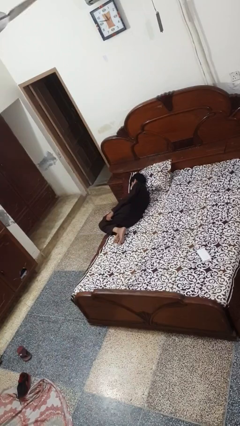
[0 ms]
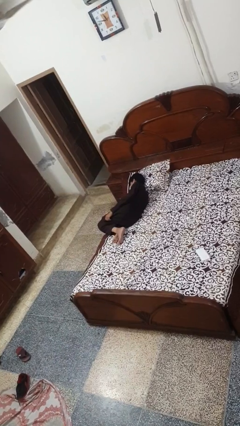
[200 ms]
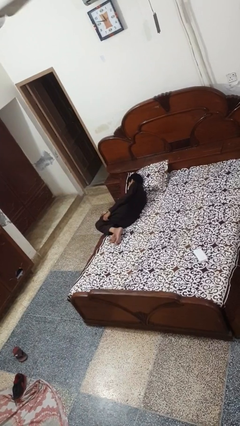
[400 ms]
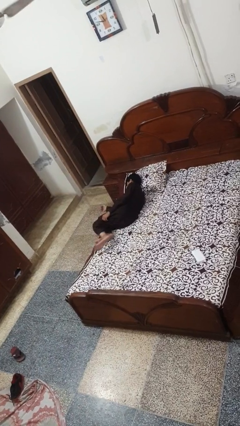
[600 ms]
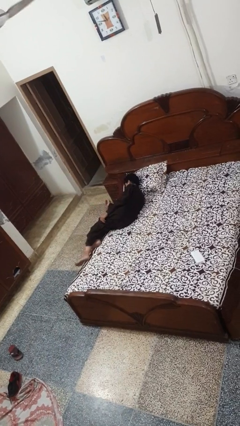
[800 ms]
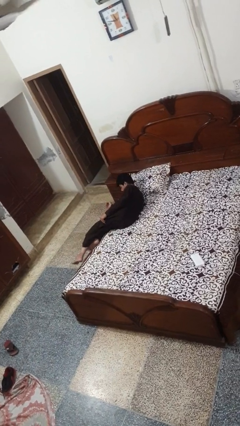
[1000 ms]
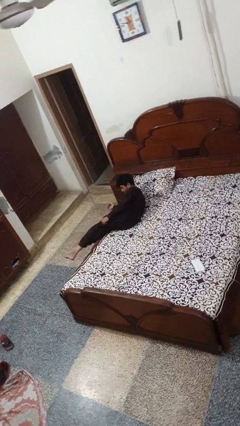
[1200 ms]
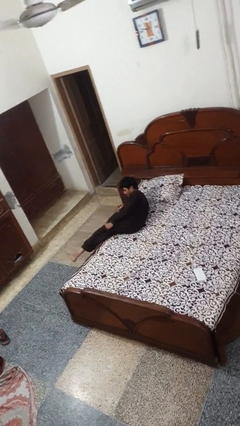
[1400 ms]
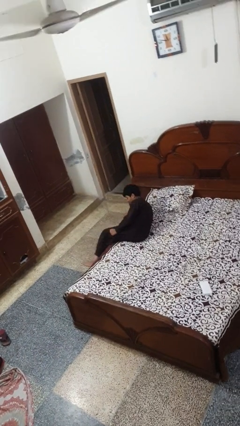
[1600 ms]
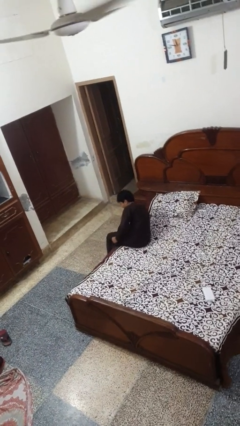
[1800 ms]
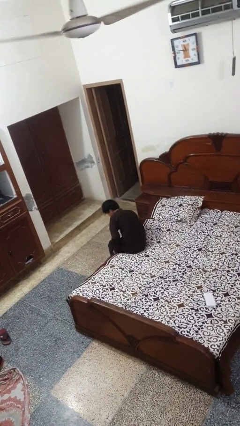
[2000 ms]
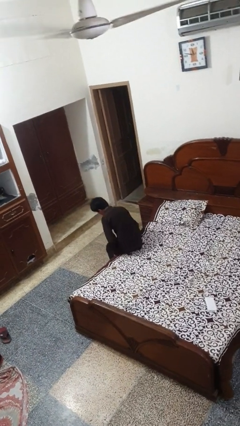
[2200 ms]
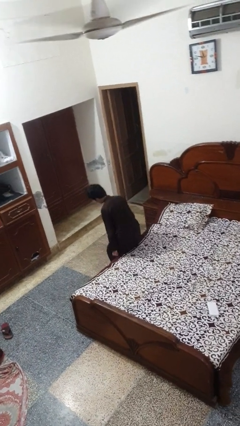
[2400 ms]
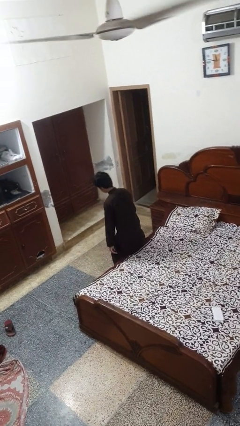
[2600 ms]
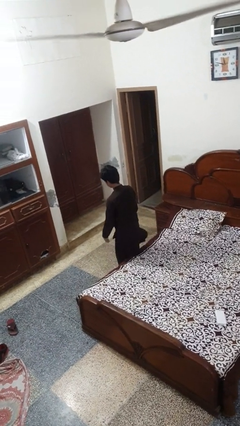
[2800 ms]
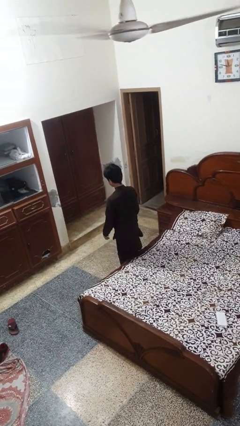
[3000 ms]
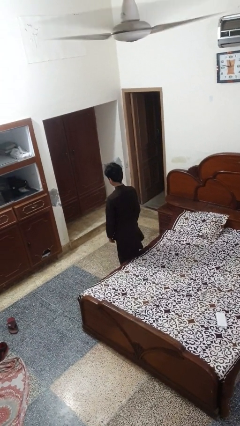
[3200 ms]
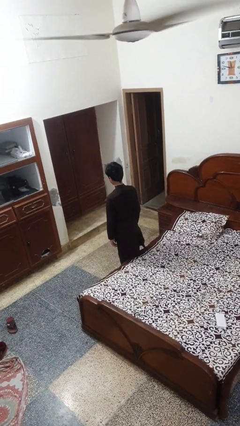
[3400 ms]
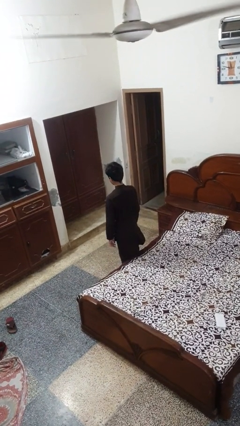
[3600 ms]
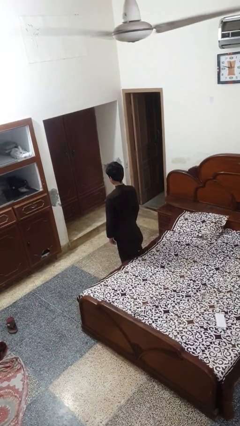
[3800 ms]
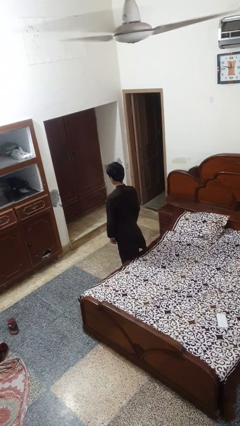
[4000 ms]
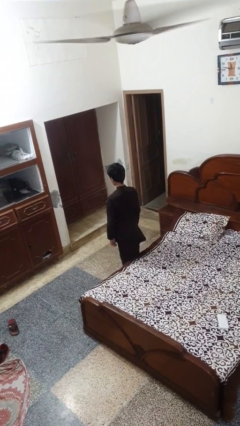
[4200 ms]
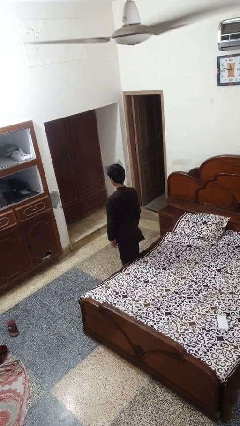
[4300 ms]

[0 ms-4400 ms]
person stands up

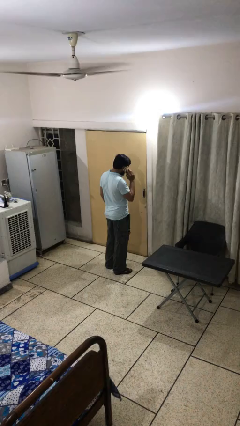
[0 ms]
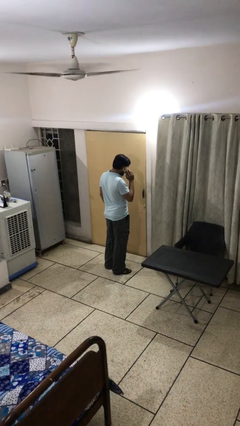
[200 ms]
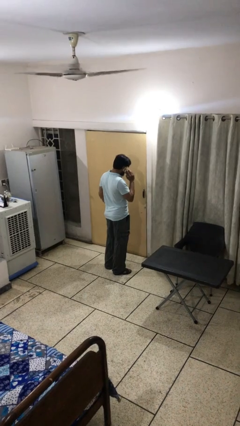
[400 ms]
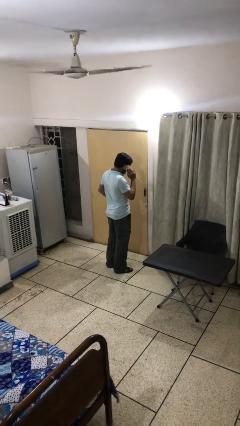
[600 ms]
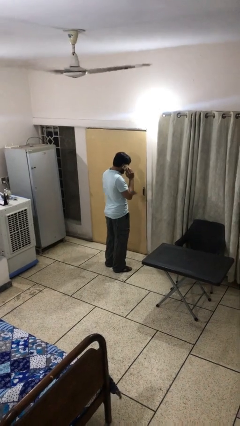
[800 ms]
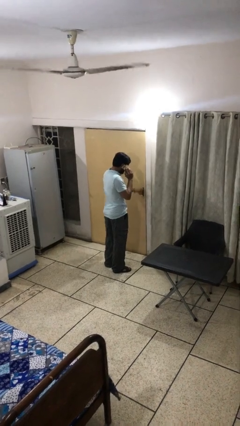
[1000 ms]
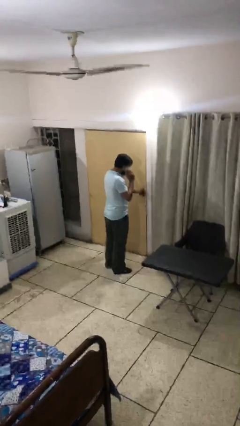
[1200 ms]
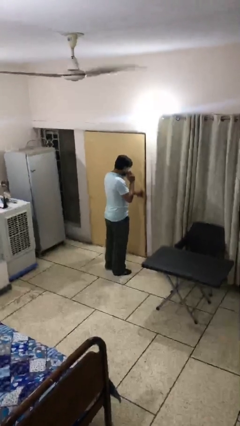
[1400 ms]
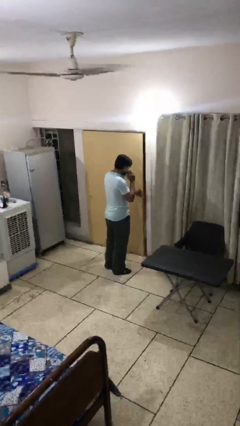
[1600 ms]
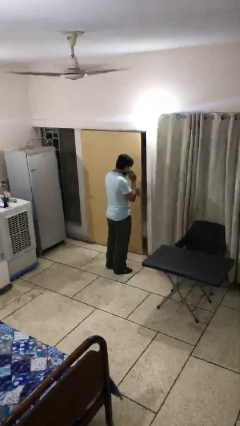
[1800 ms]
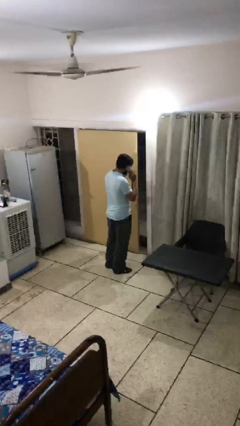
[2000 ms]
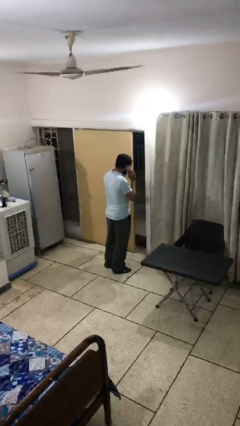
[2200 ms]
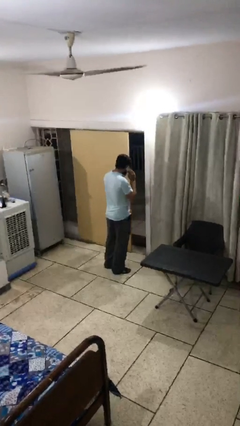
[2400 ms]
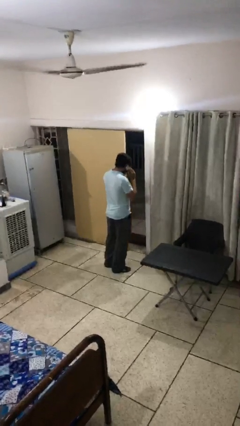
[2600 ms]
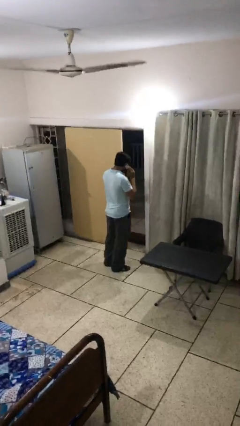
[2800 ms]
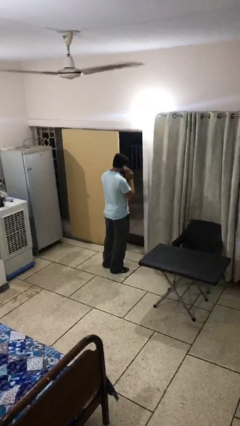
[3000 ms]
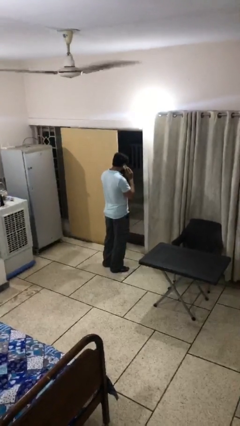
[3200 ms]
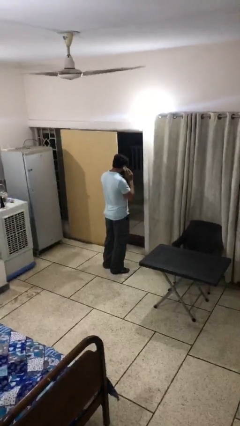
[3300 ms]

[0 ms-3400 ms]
person opens facility door

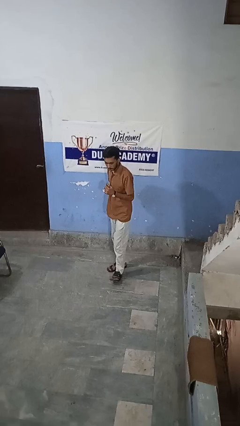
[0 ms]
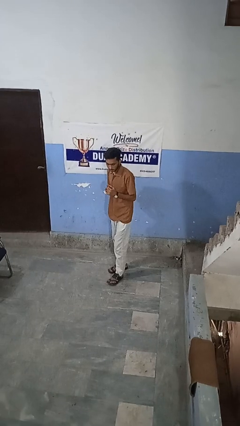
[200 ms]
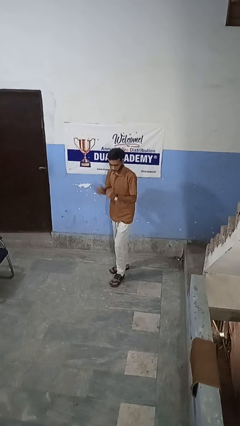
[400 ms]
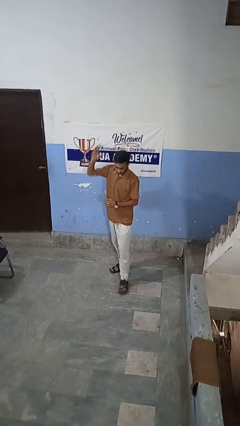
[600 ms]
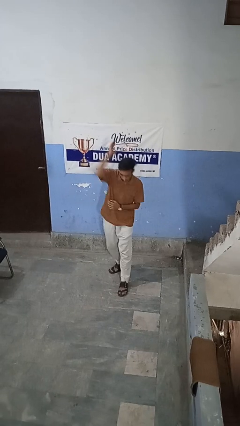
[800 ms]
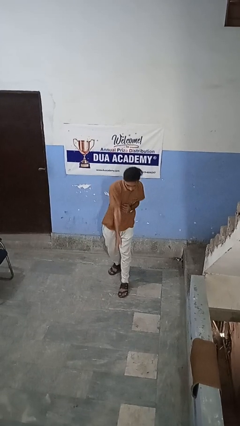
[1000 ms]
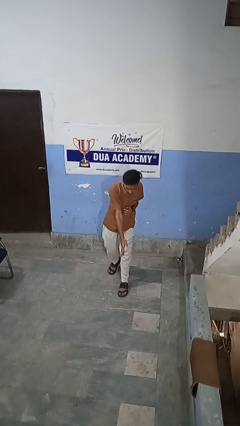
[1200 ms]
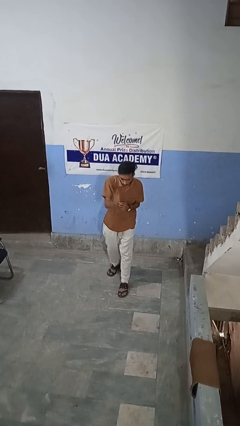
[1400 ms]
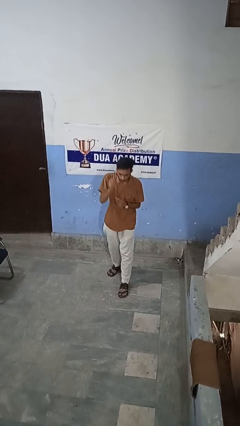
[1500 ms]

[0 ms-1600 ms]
person karate chop

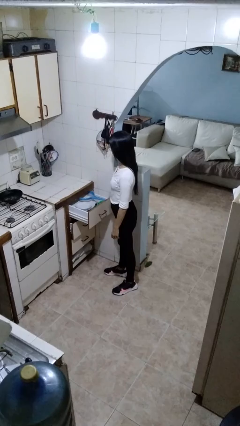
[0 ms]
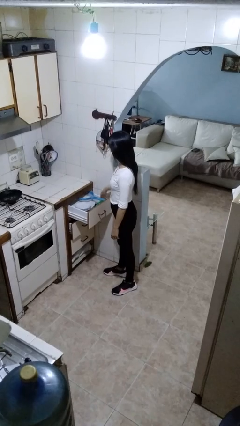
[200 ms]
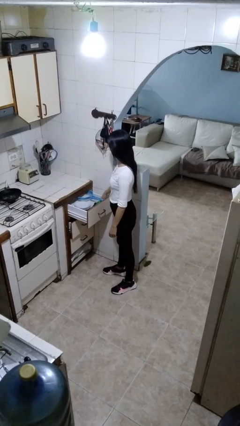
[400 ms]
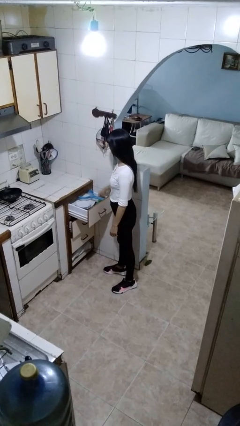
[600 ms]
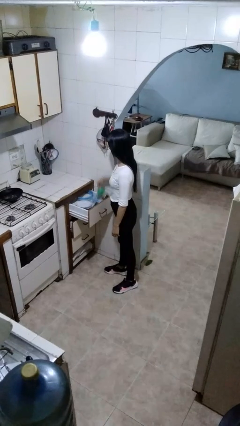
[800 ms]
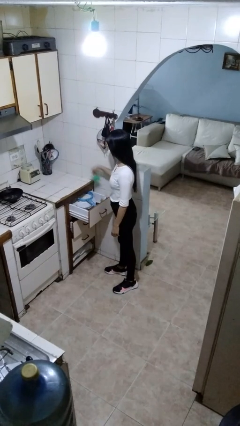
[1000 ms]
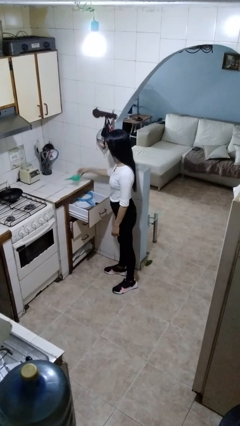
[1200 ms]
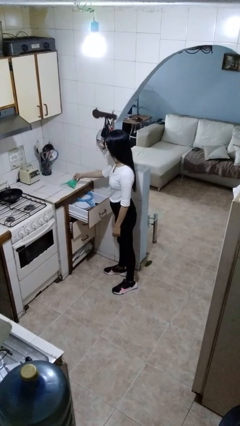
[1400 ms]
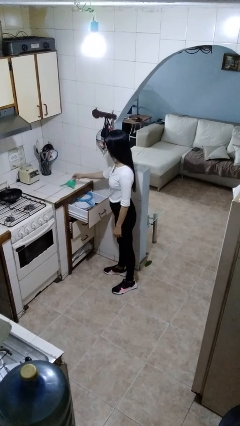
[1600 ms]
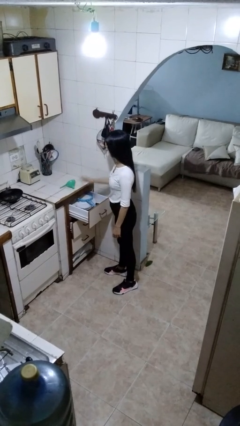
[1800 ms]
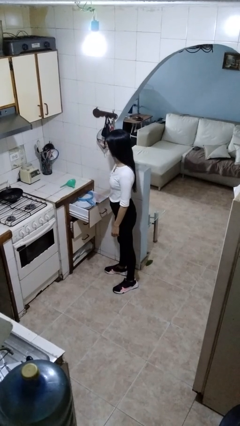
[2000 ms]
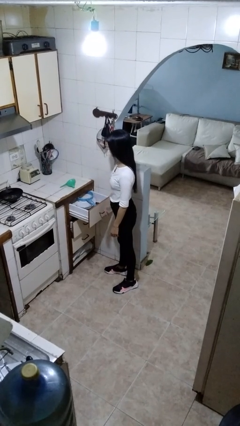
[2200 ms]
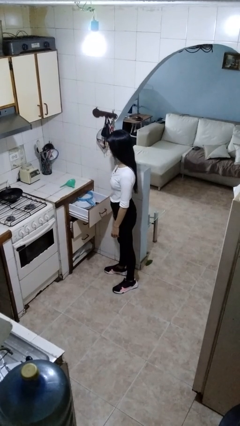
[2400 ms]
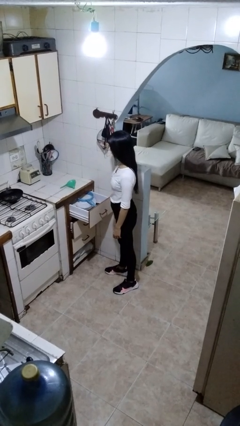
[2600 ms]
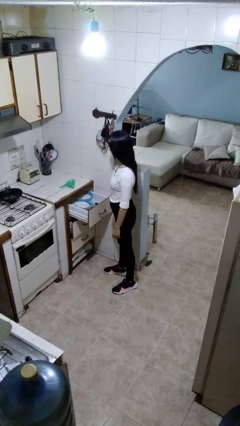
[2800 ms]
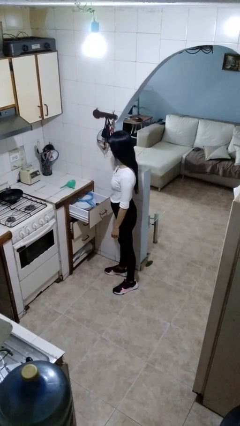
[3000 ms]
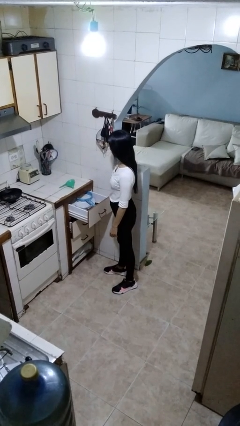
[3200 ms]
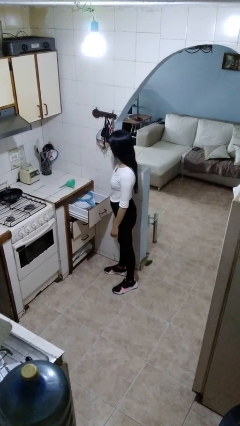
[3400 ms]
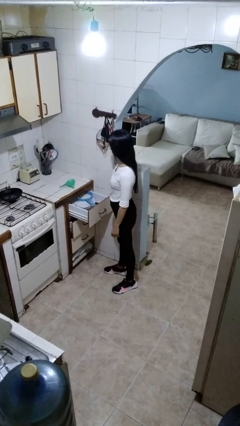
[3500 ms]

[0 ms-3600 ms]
person takes object from kitchen drawer

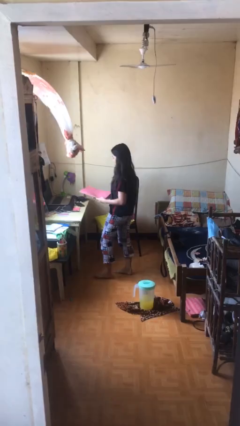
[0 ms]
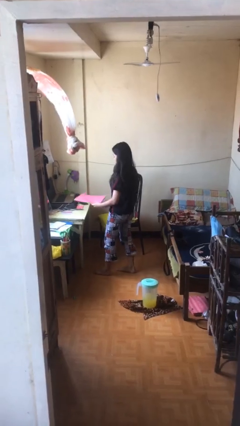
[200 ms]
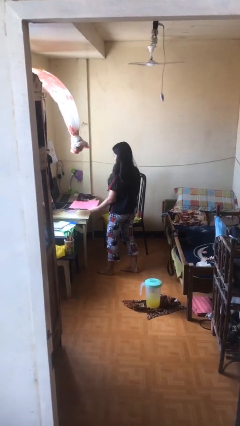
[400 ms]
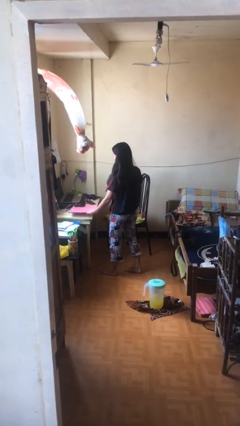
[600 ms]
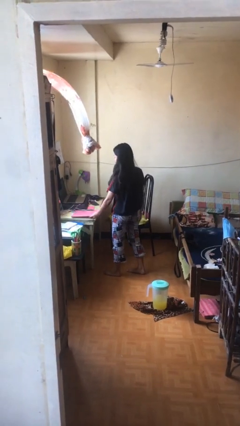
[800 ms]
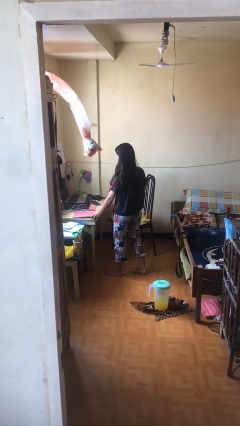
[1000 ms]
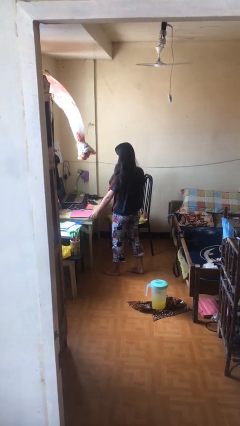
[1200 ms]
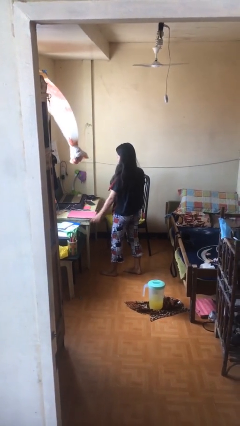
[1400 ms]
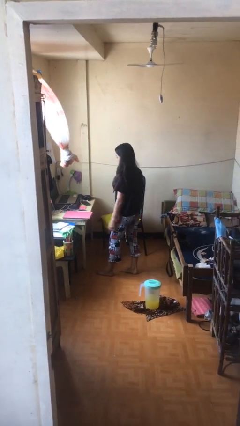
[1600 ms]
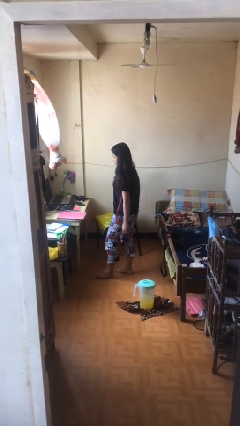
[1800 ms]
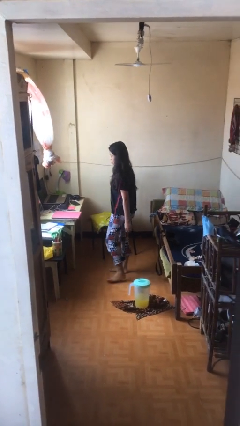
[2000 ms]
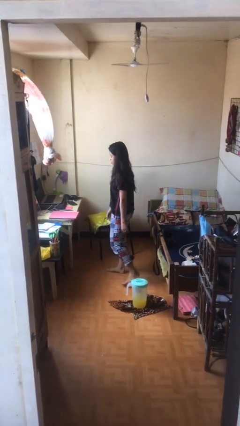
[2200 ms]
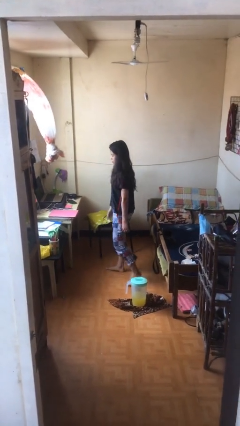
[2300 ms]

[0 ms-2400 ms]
person puts down object on table

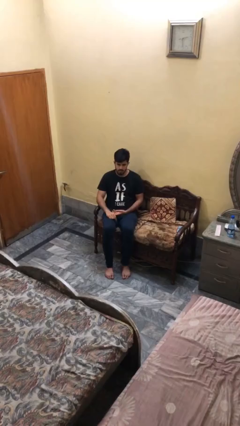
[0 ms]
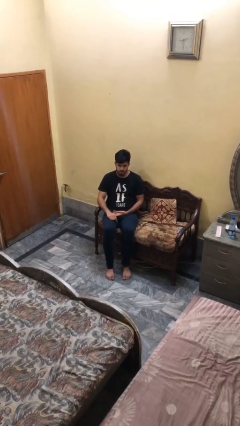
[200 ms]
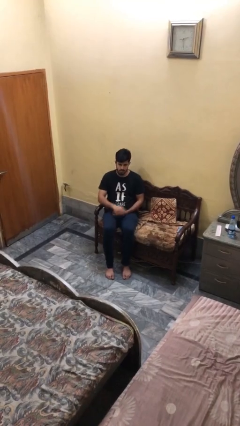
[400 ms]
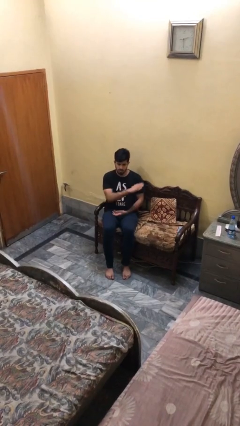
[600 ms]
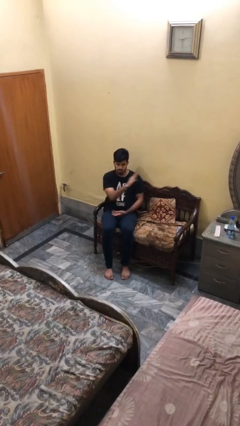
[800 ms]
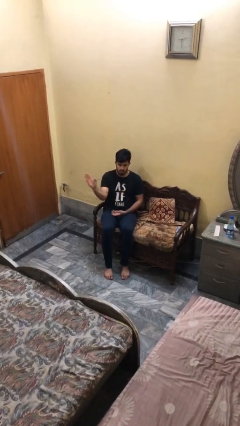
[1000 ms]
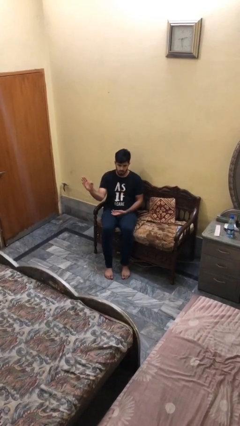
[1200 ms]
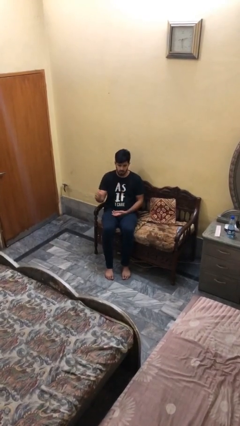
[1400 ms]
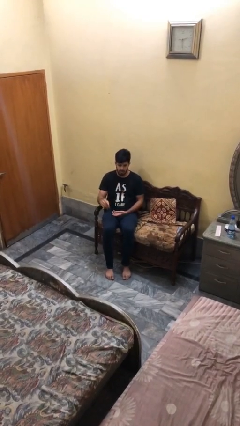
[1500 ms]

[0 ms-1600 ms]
person gestures swipe right

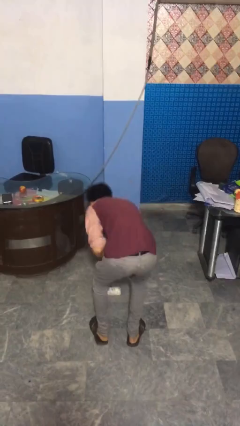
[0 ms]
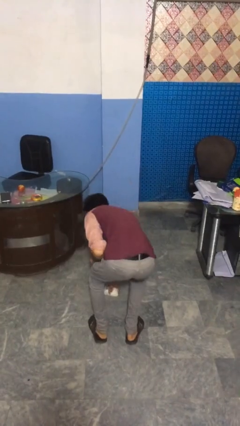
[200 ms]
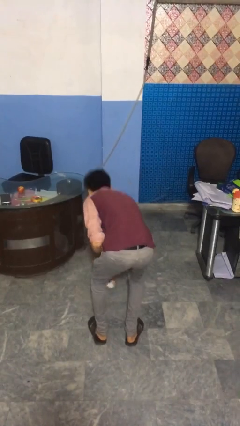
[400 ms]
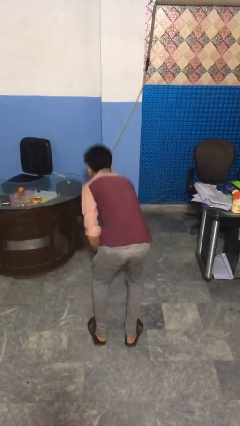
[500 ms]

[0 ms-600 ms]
person picks up object from floor
